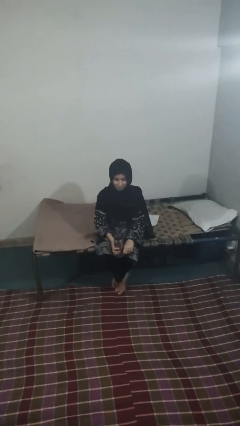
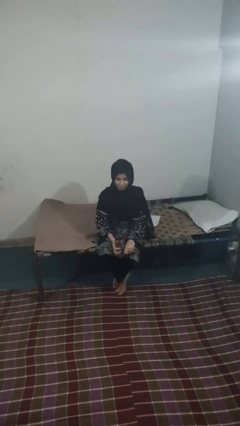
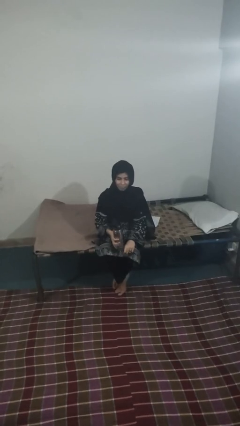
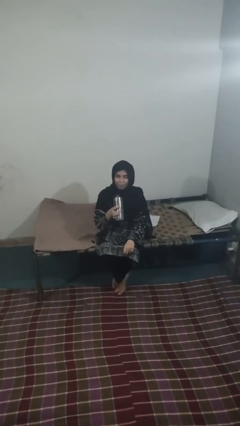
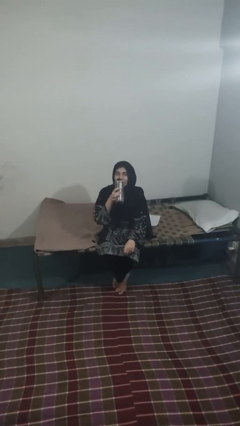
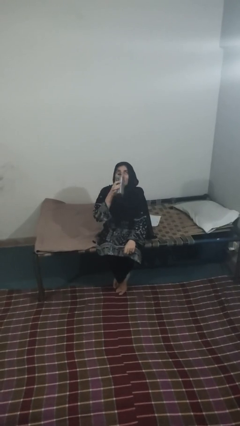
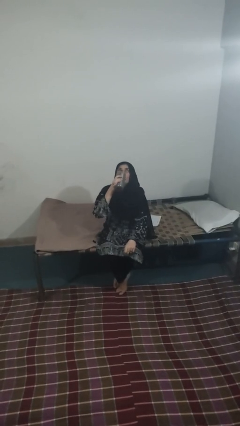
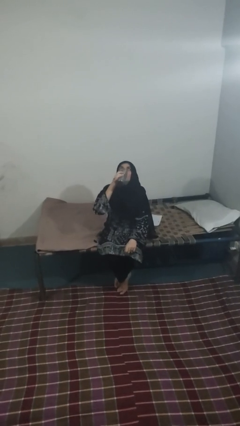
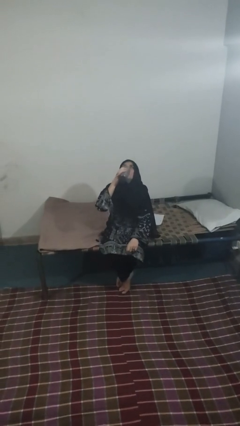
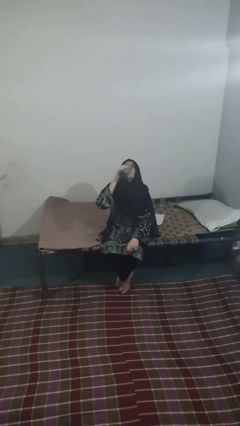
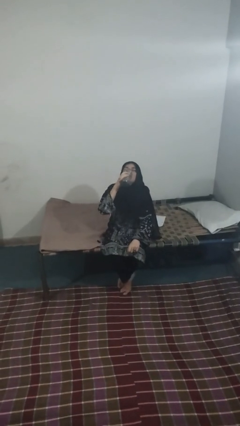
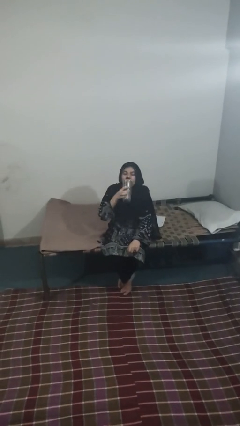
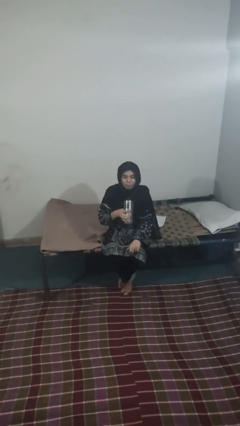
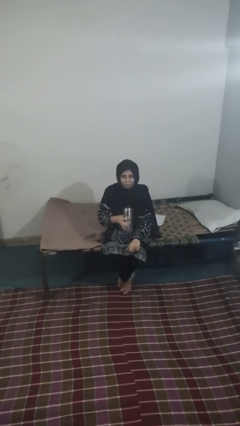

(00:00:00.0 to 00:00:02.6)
person drinks from beverage can

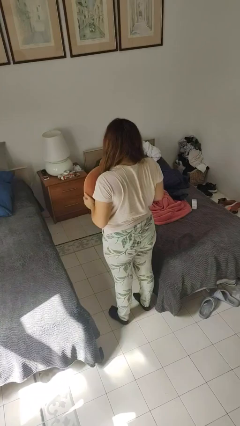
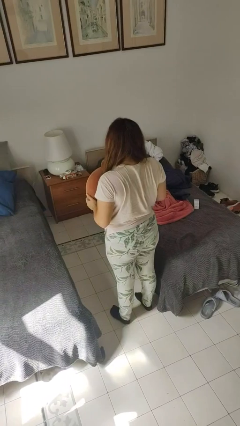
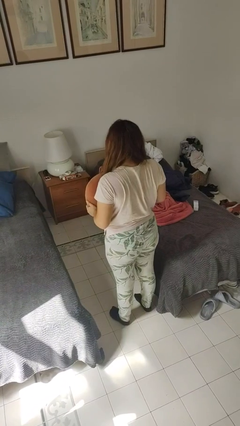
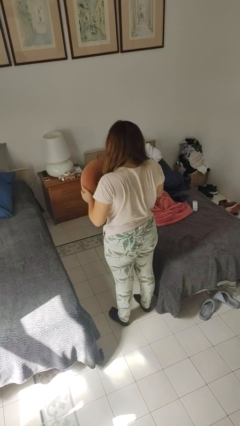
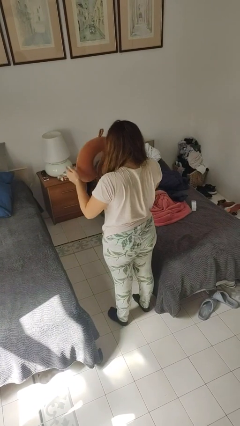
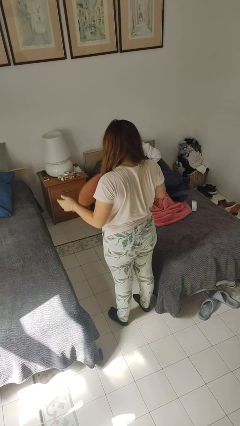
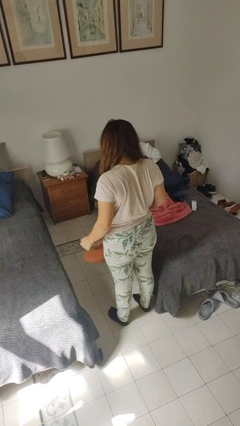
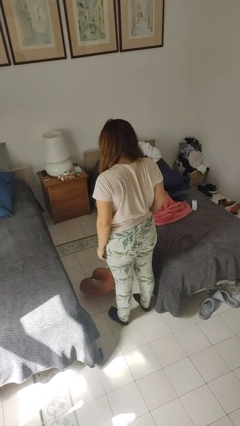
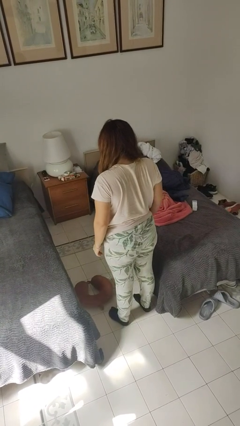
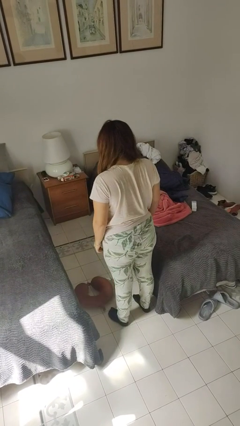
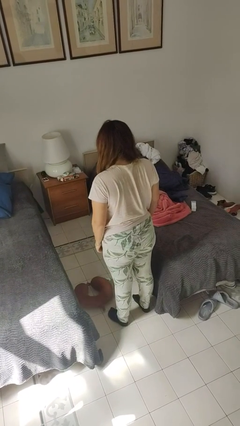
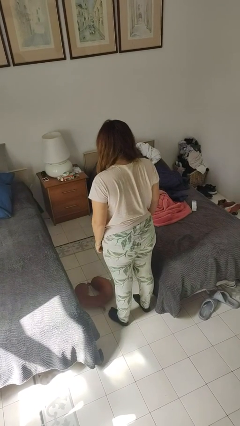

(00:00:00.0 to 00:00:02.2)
person throws object into air

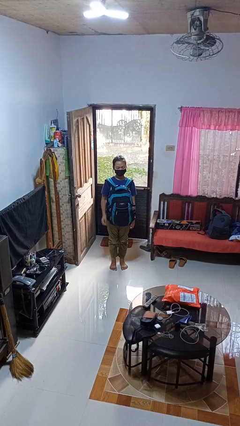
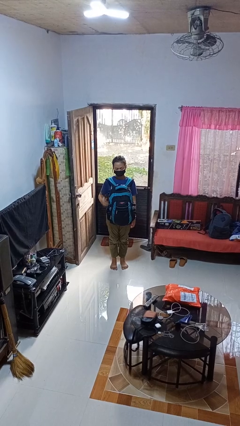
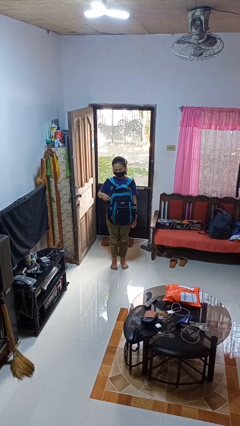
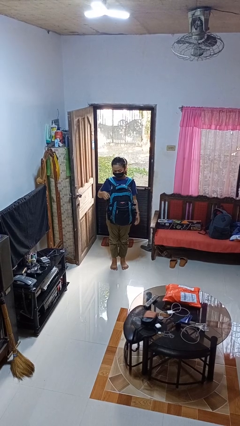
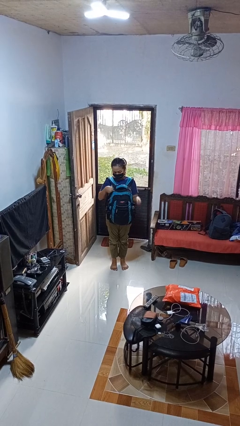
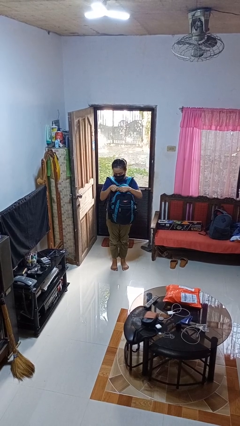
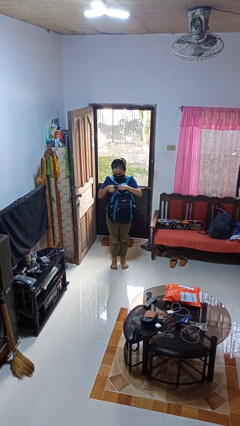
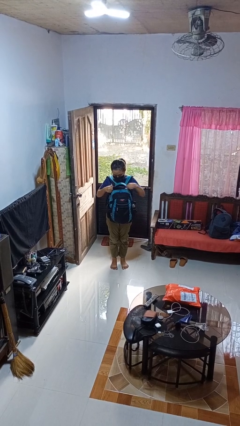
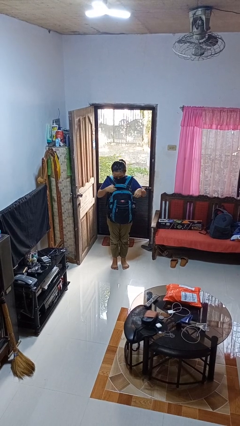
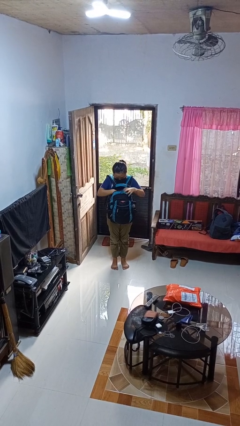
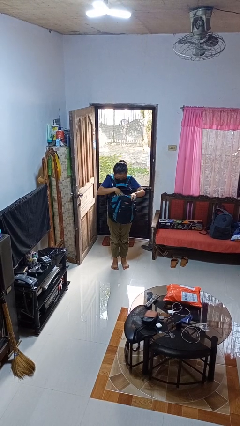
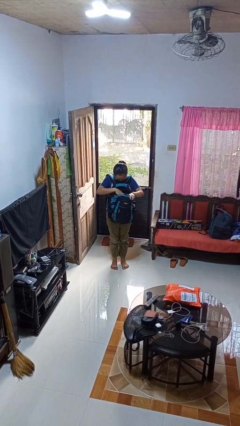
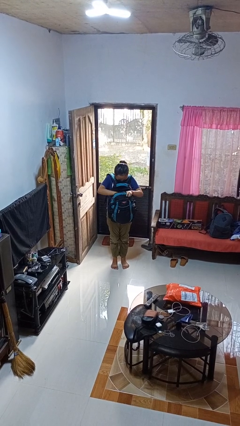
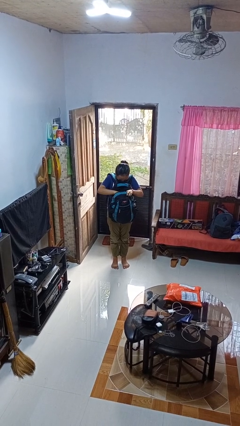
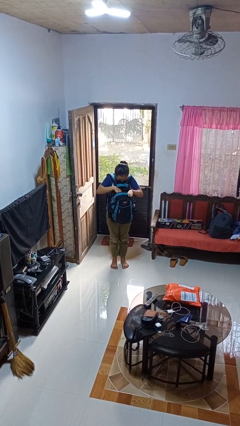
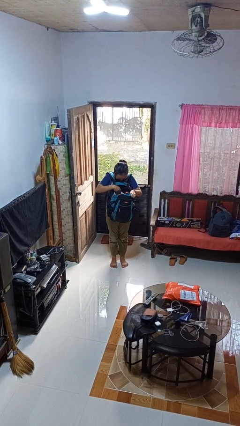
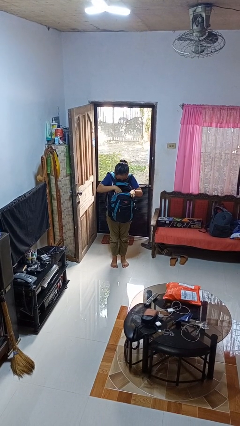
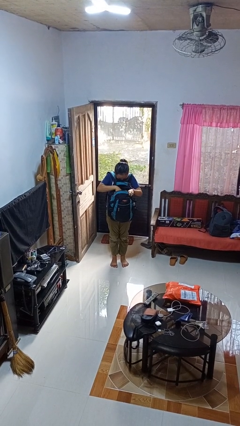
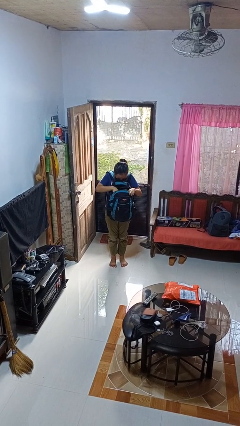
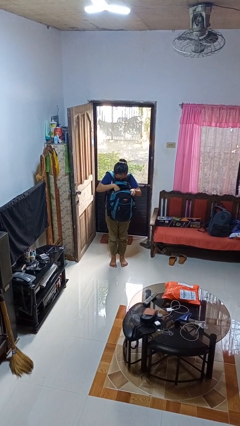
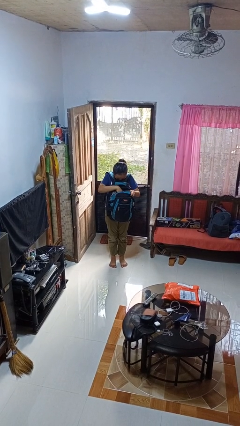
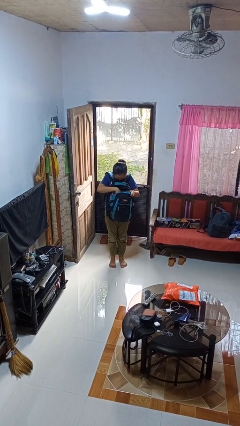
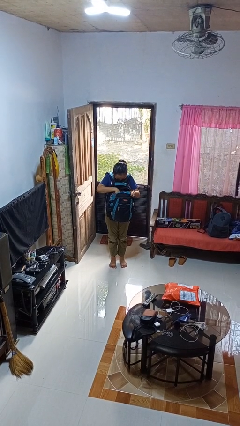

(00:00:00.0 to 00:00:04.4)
person searches in backpack

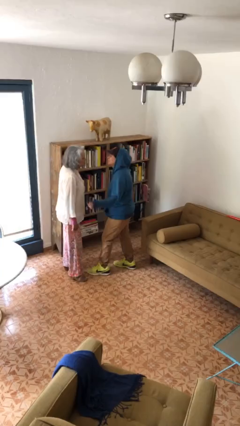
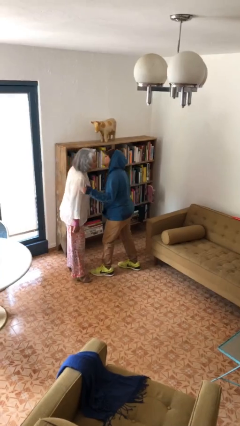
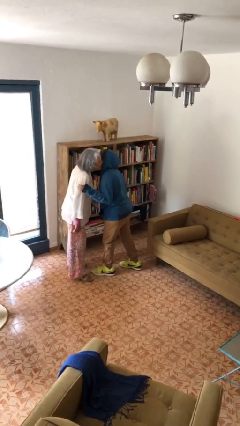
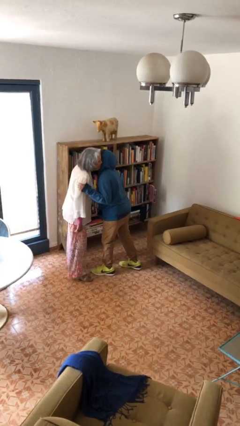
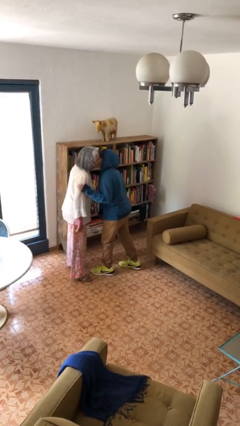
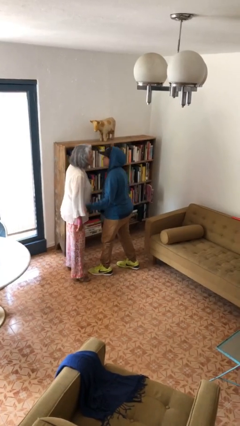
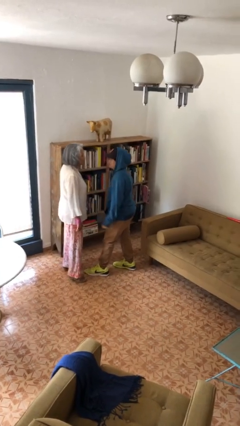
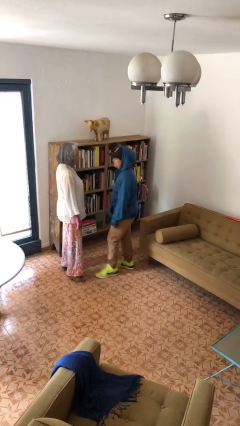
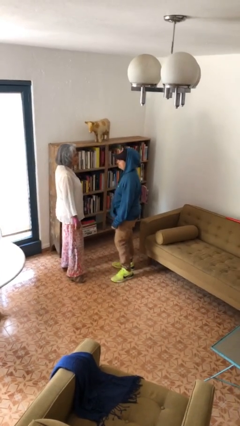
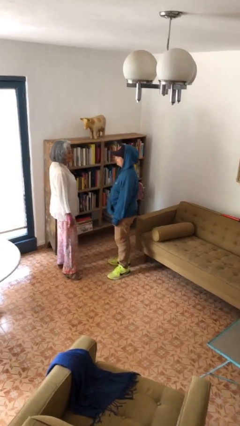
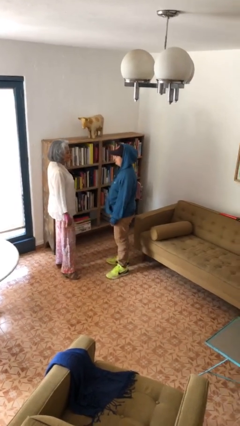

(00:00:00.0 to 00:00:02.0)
person kisses cheek of person

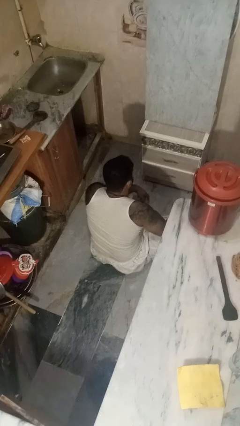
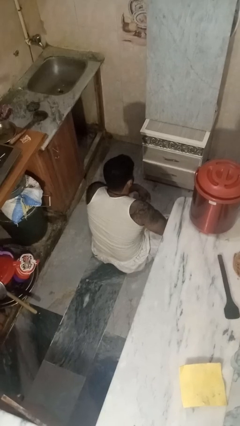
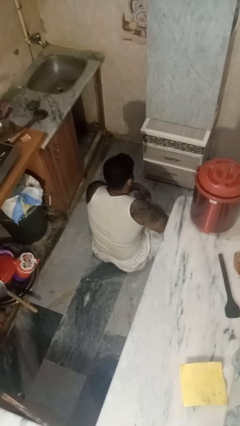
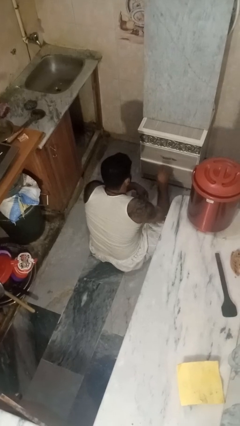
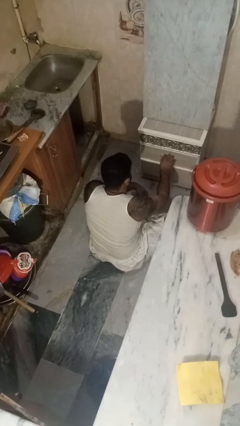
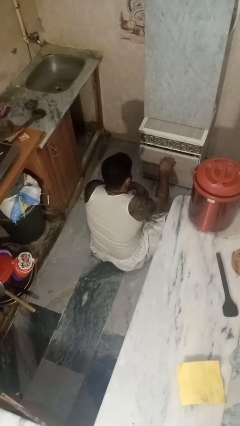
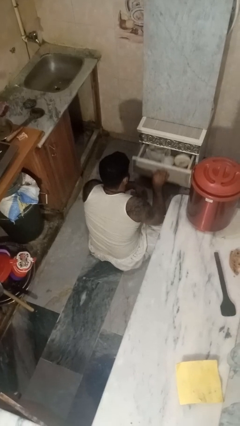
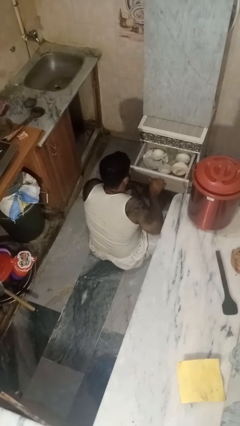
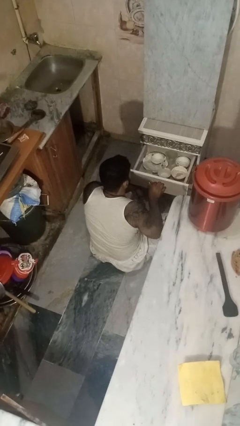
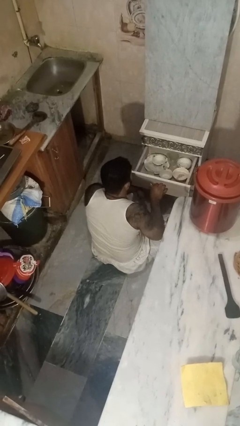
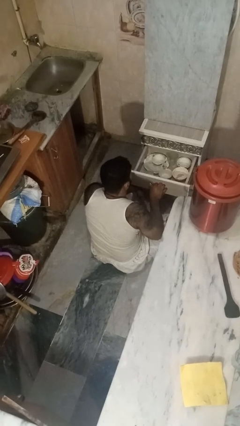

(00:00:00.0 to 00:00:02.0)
person opens kitchen drawer

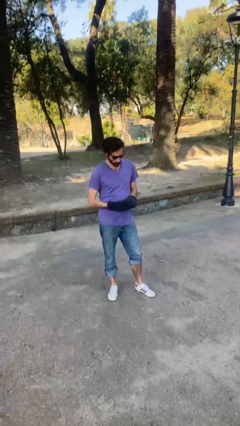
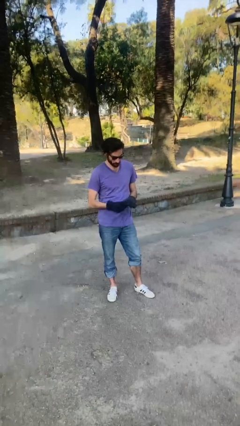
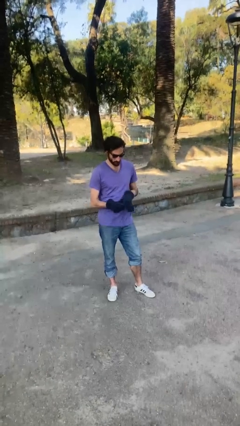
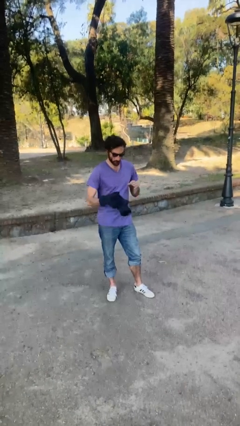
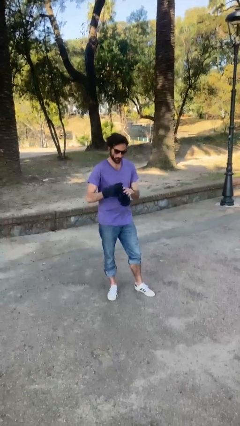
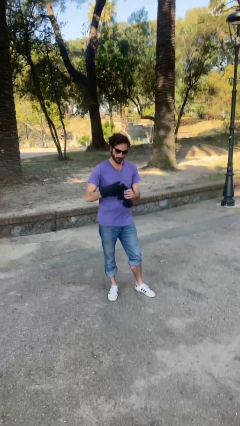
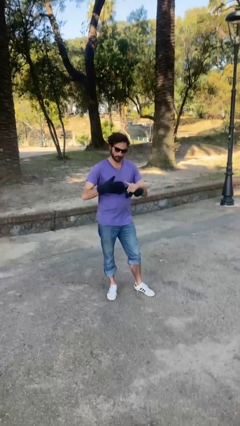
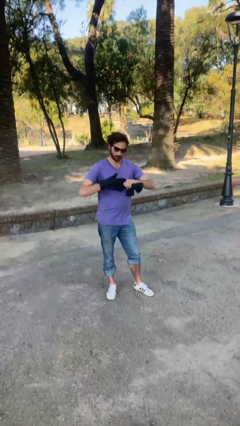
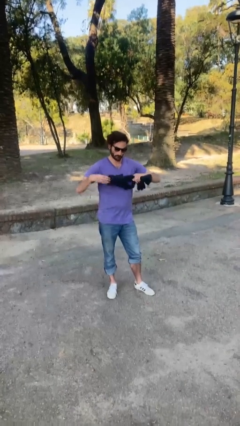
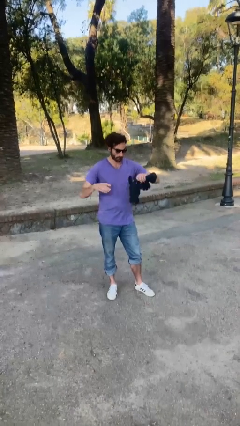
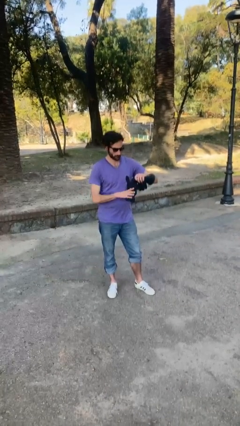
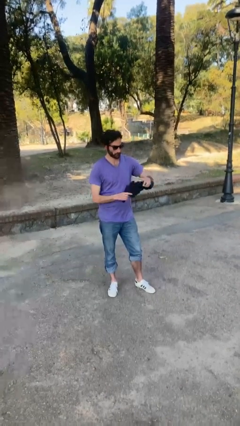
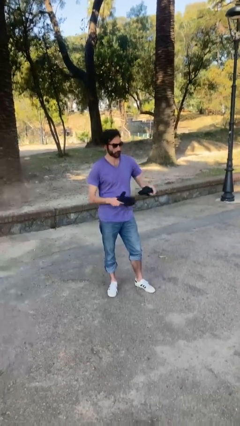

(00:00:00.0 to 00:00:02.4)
person takes off gloves

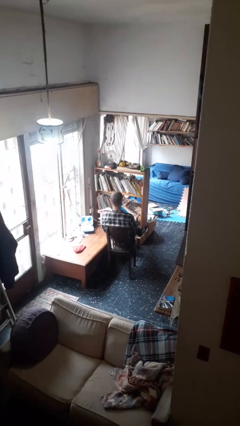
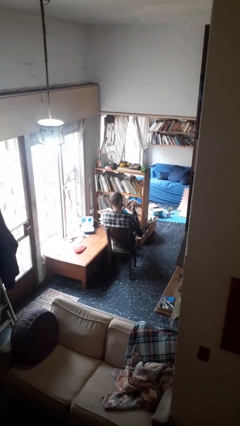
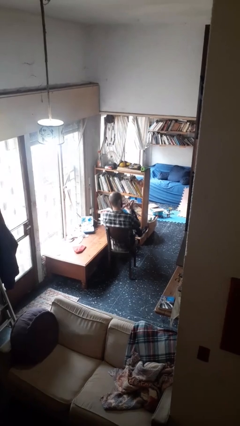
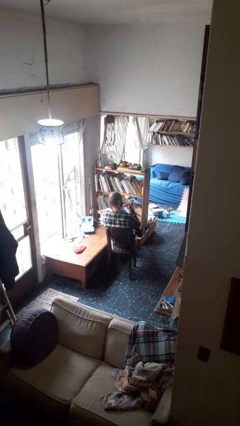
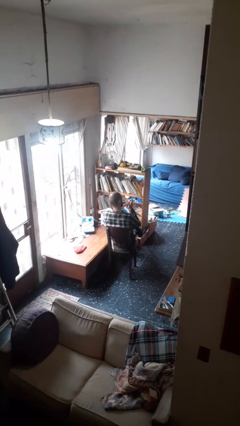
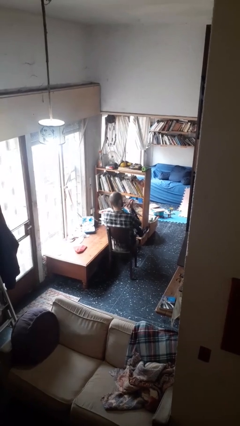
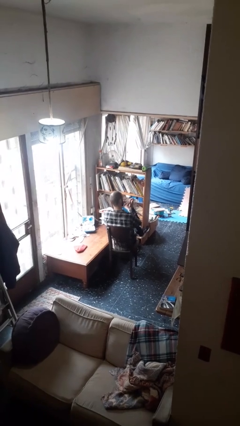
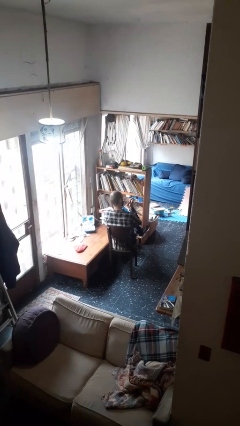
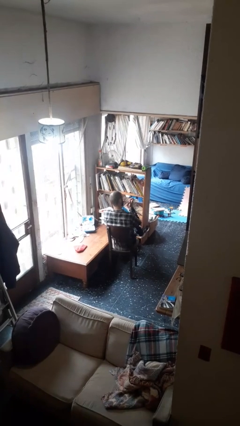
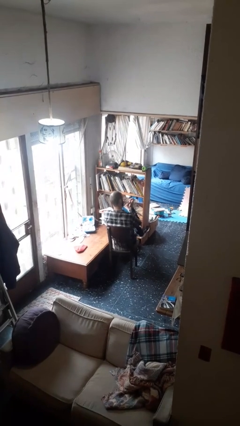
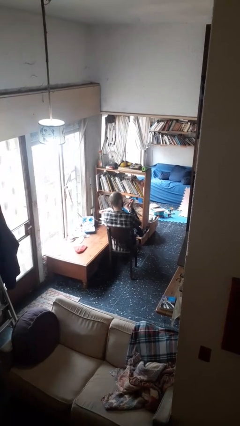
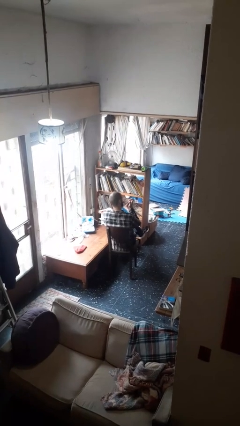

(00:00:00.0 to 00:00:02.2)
person clips fingernails
